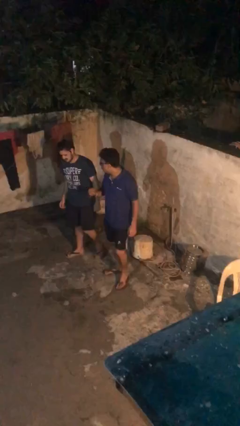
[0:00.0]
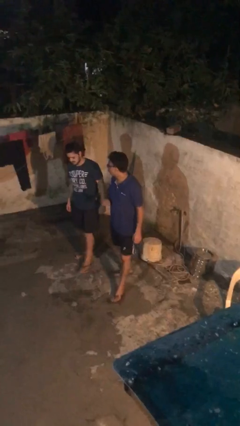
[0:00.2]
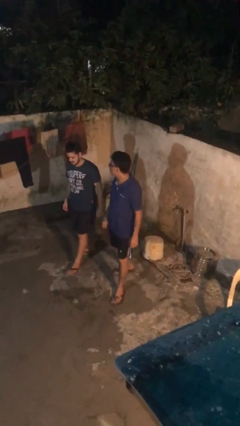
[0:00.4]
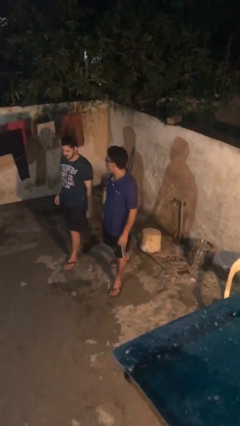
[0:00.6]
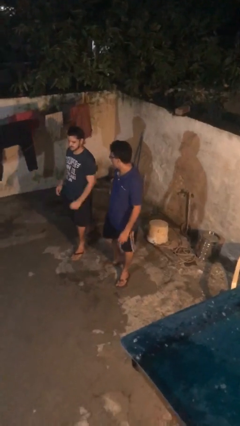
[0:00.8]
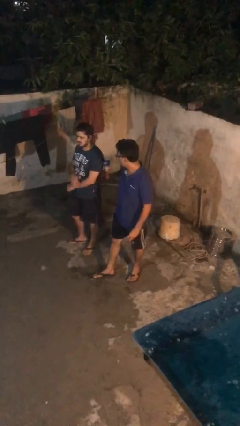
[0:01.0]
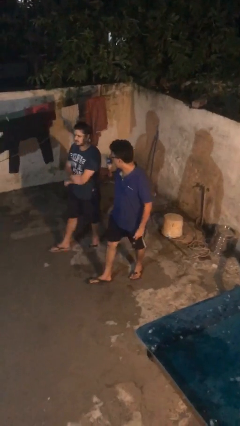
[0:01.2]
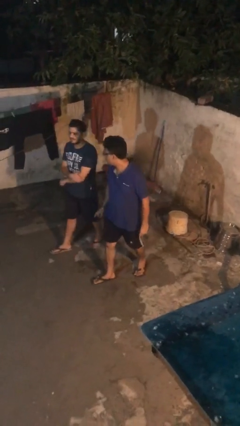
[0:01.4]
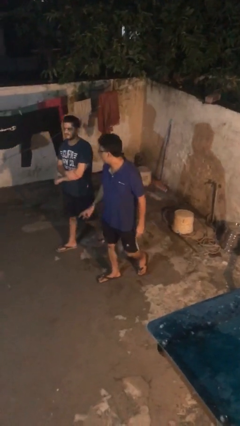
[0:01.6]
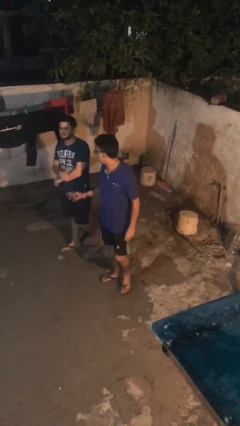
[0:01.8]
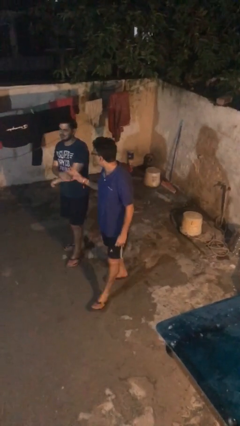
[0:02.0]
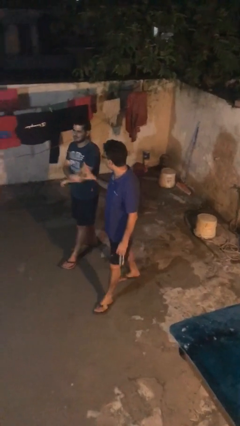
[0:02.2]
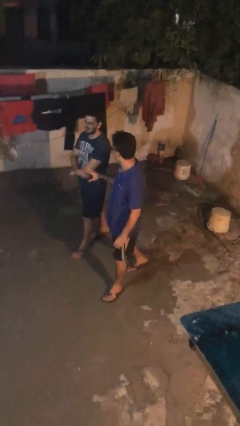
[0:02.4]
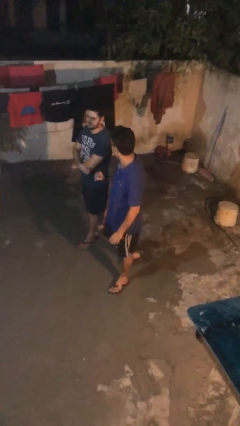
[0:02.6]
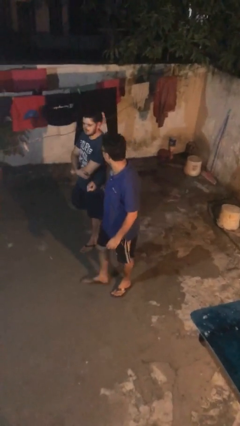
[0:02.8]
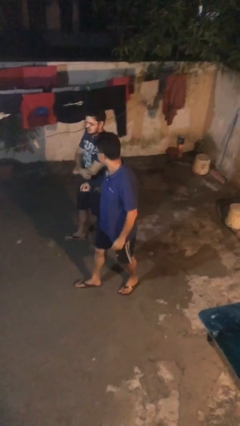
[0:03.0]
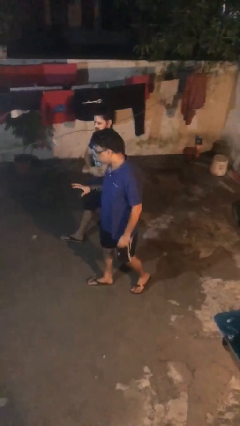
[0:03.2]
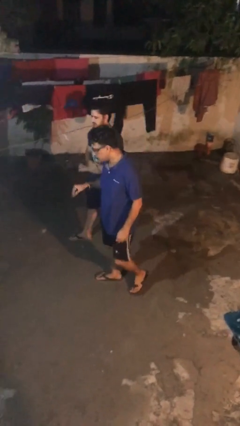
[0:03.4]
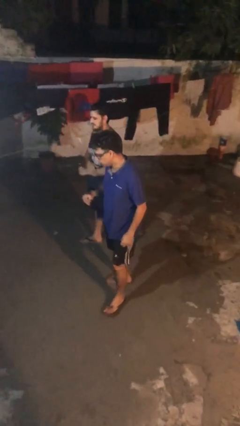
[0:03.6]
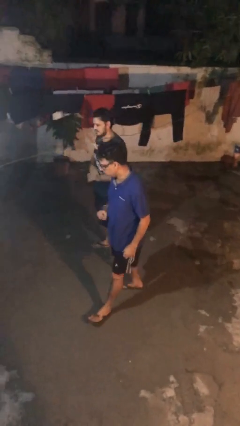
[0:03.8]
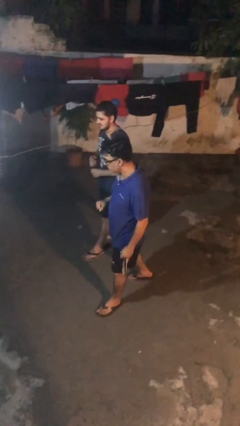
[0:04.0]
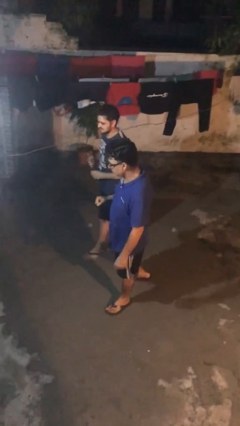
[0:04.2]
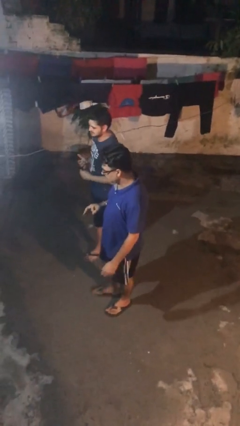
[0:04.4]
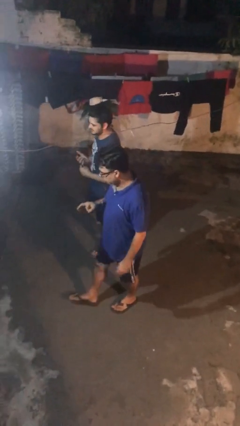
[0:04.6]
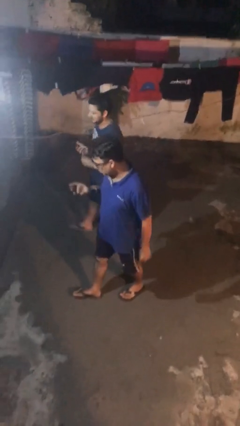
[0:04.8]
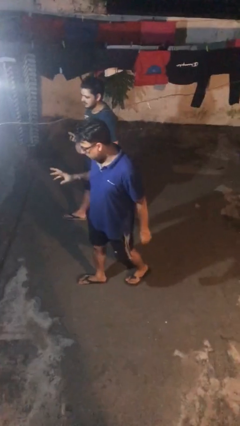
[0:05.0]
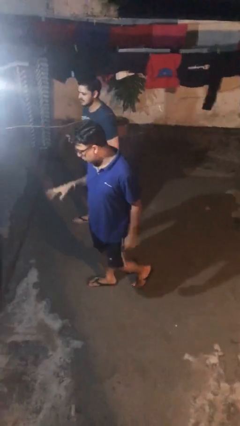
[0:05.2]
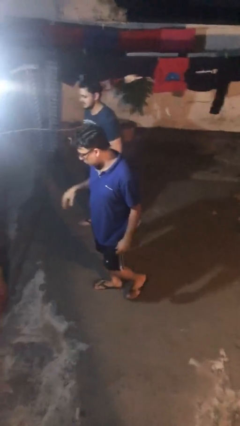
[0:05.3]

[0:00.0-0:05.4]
person talks to person

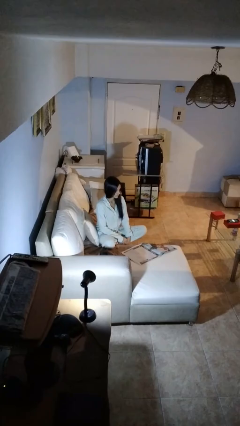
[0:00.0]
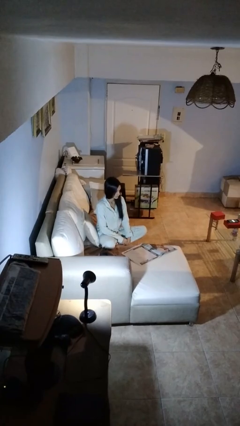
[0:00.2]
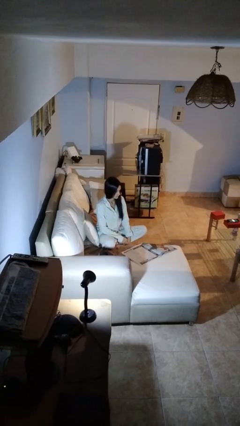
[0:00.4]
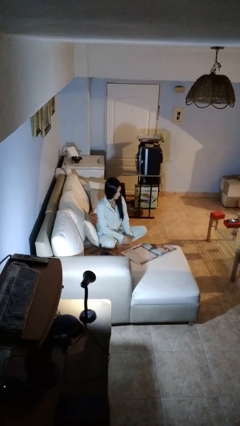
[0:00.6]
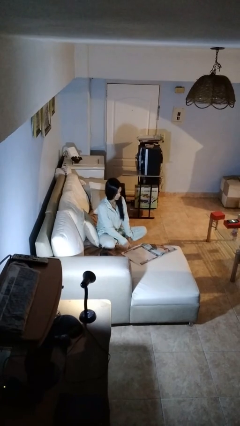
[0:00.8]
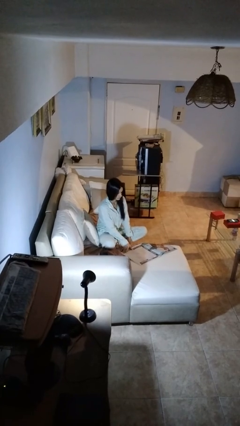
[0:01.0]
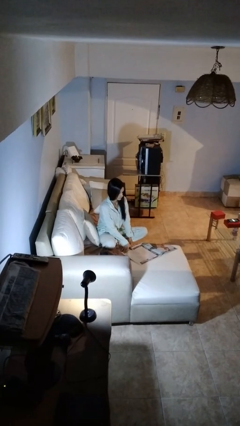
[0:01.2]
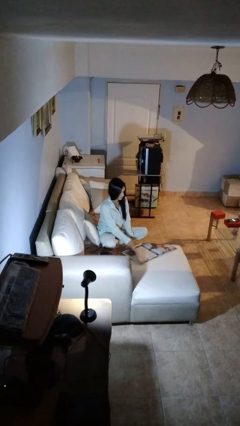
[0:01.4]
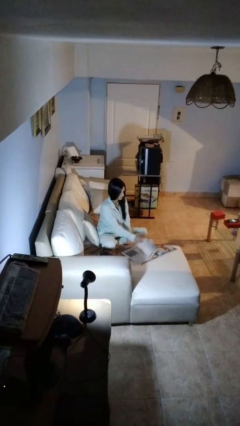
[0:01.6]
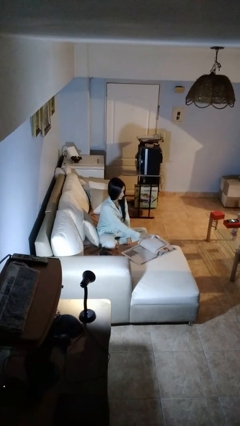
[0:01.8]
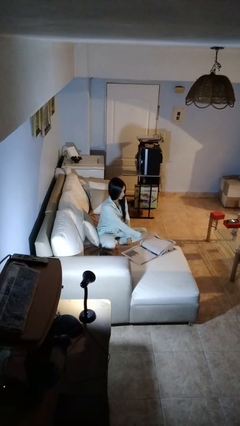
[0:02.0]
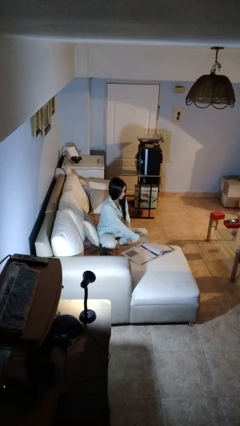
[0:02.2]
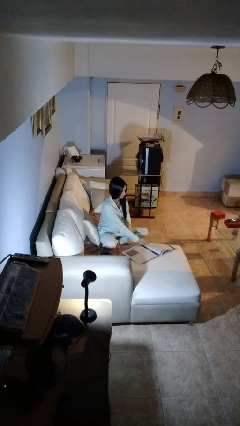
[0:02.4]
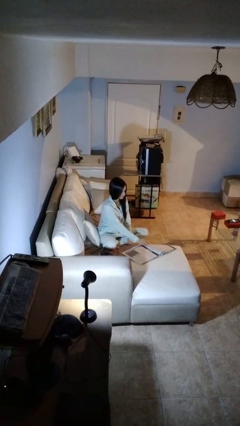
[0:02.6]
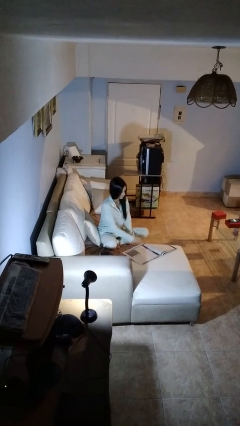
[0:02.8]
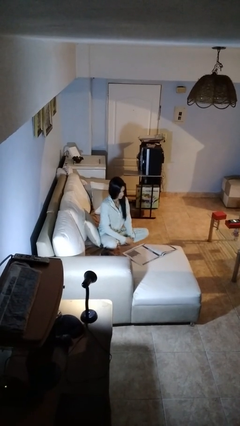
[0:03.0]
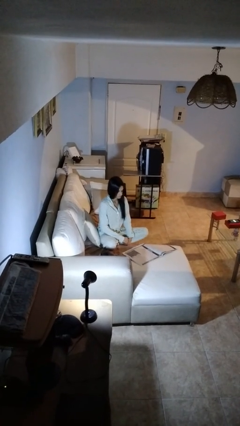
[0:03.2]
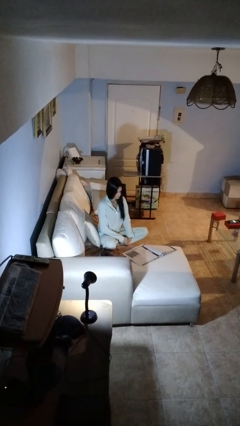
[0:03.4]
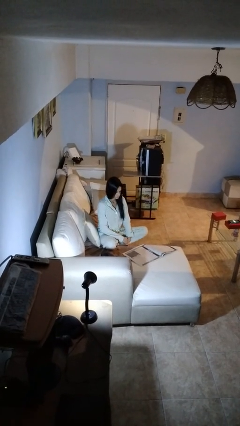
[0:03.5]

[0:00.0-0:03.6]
person reads newspaper

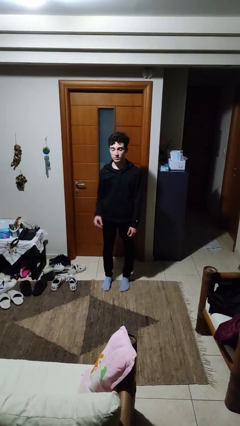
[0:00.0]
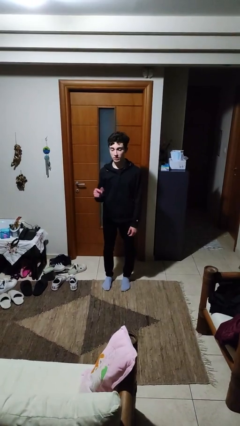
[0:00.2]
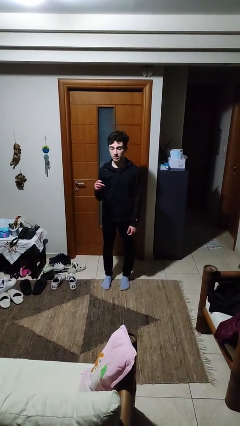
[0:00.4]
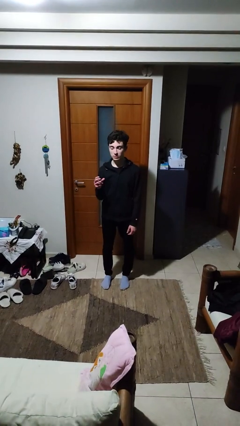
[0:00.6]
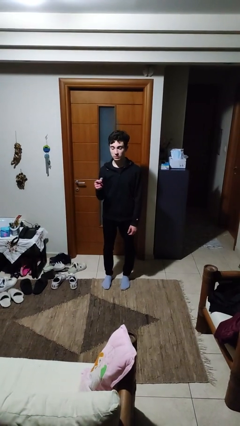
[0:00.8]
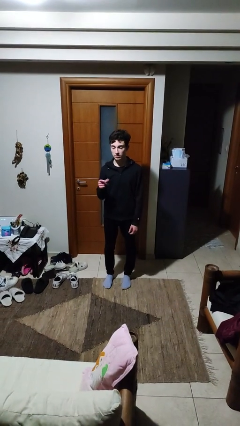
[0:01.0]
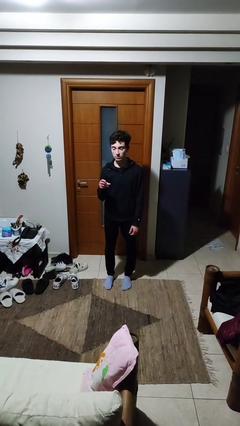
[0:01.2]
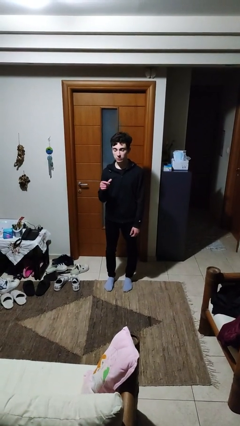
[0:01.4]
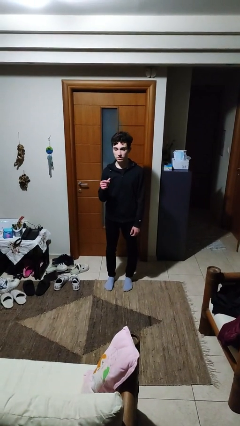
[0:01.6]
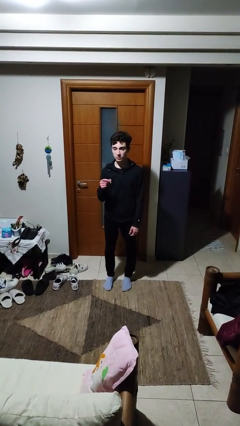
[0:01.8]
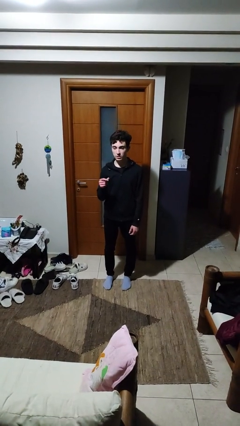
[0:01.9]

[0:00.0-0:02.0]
person snaps fingers

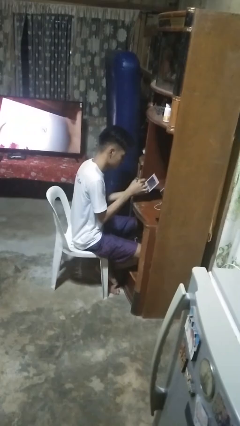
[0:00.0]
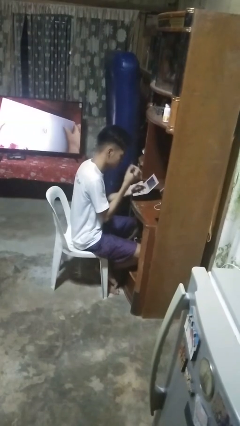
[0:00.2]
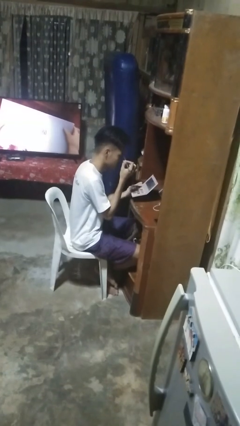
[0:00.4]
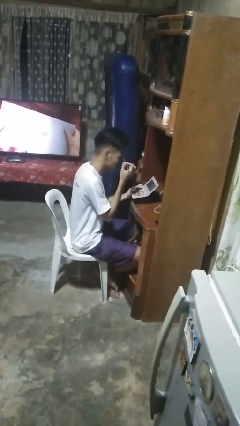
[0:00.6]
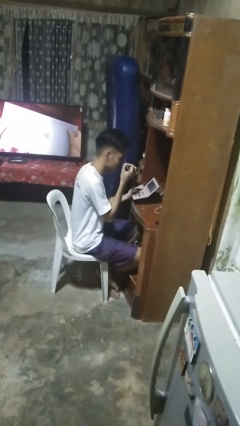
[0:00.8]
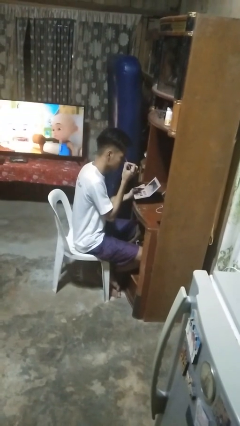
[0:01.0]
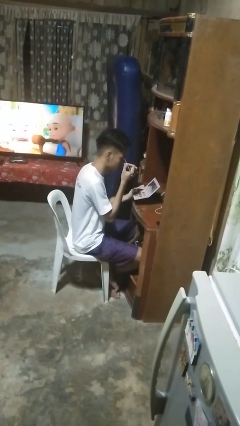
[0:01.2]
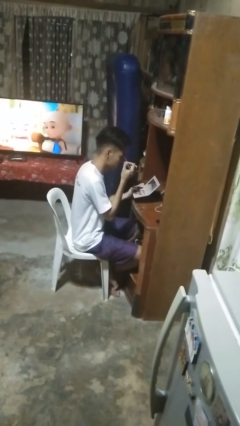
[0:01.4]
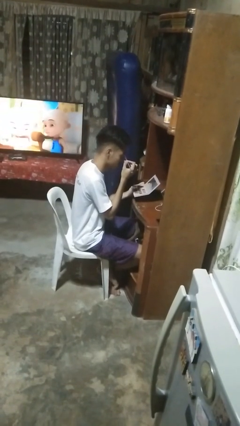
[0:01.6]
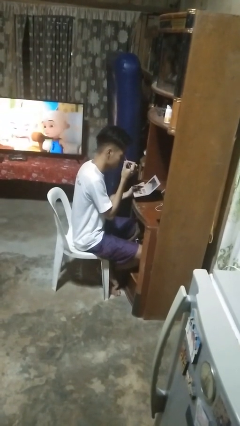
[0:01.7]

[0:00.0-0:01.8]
person applies eye makeup

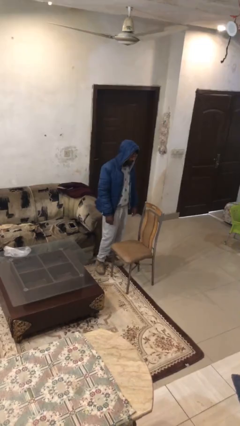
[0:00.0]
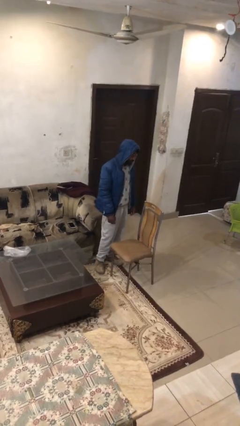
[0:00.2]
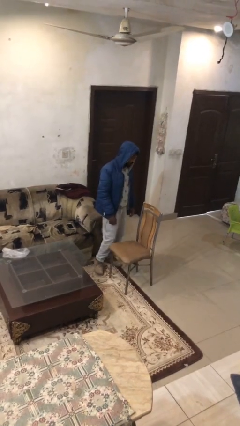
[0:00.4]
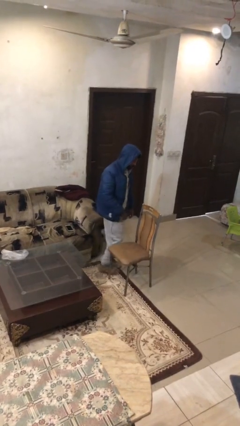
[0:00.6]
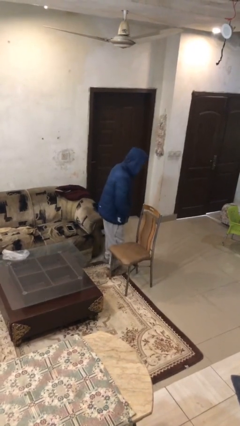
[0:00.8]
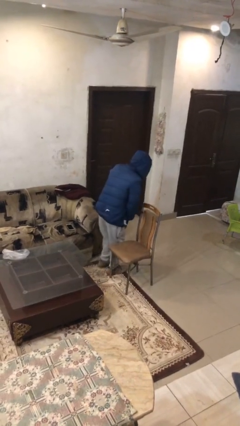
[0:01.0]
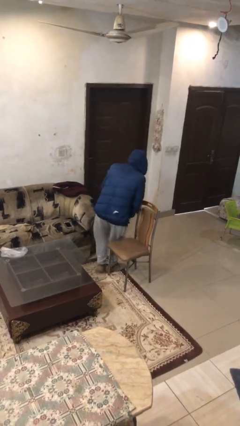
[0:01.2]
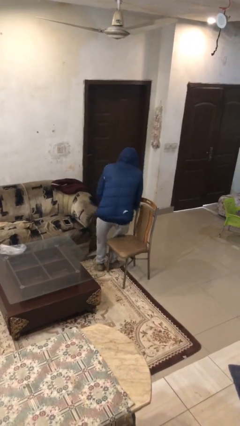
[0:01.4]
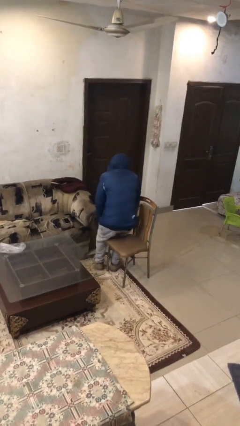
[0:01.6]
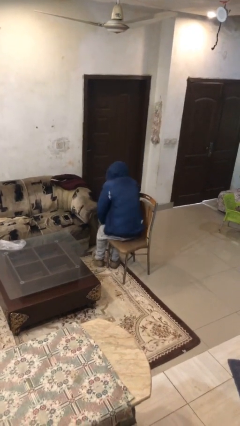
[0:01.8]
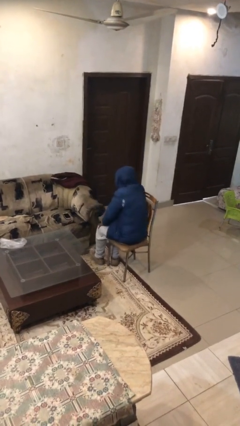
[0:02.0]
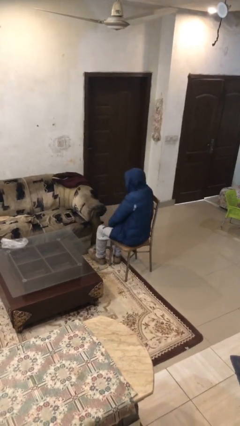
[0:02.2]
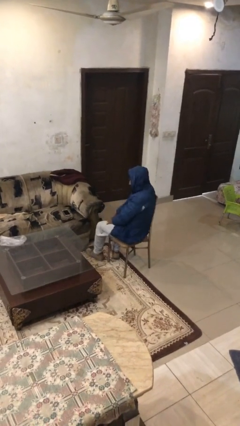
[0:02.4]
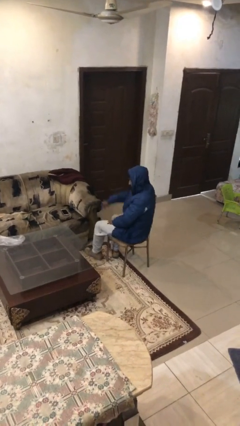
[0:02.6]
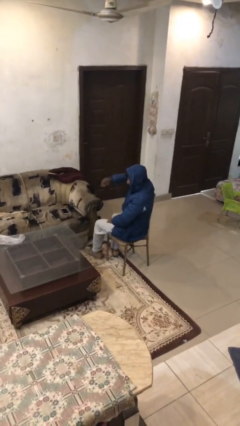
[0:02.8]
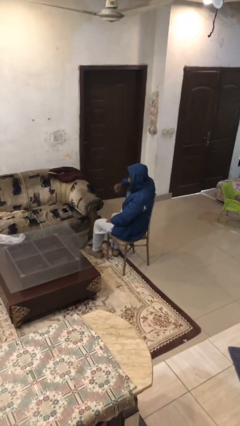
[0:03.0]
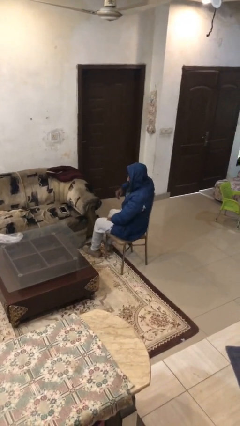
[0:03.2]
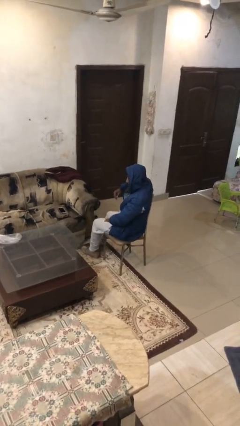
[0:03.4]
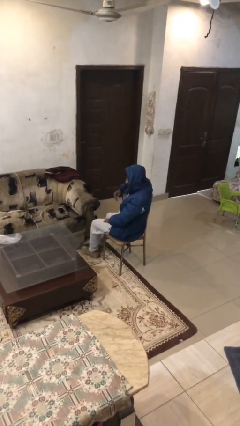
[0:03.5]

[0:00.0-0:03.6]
person sits down

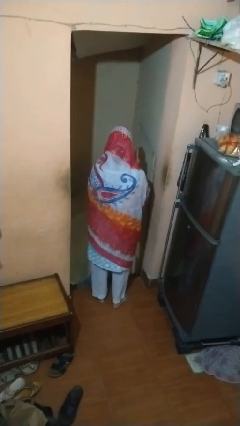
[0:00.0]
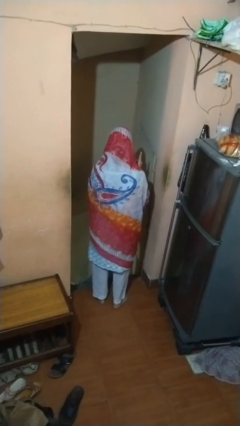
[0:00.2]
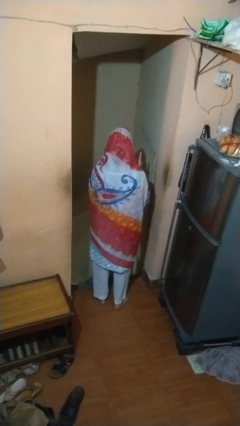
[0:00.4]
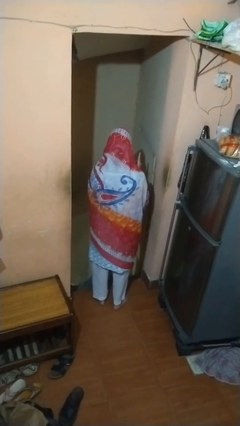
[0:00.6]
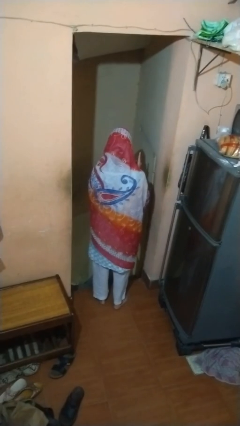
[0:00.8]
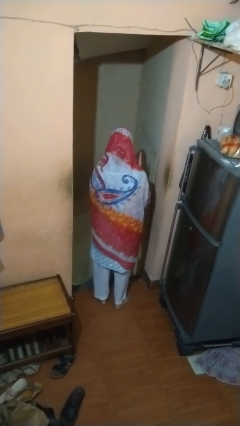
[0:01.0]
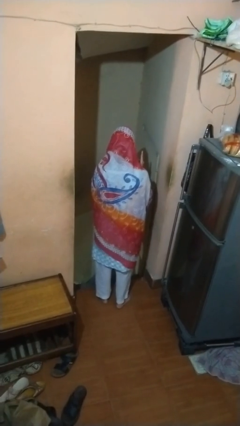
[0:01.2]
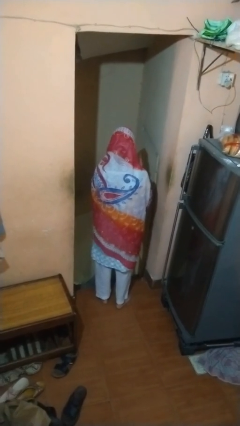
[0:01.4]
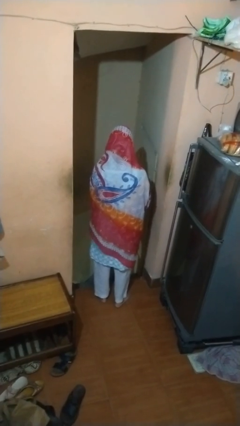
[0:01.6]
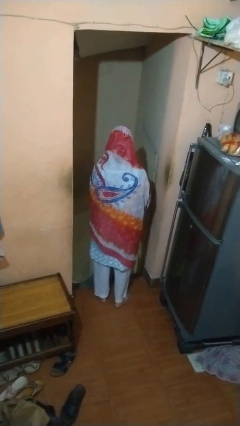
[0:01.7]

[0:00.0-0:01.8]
person gestures number one
